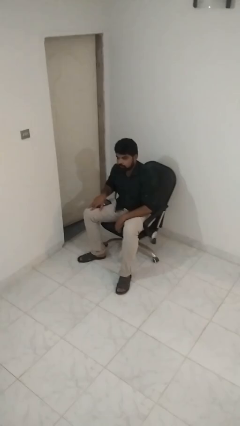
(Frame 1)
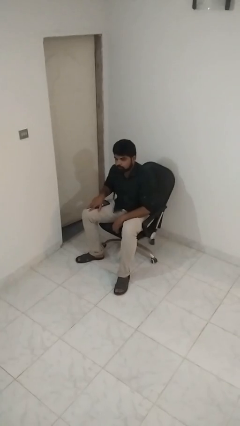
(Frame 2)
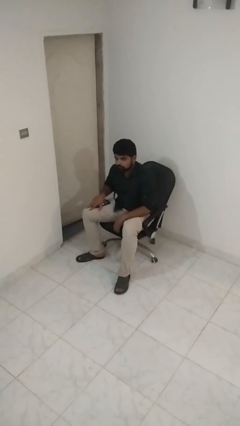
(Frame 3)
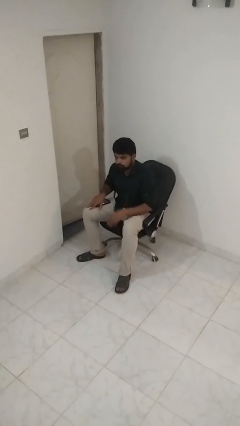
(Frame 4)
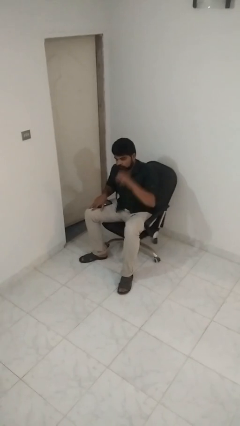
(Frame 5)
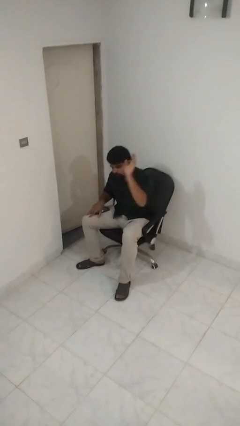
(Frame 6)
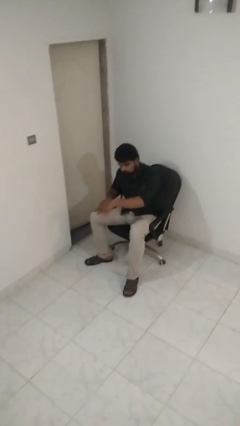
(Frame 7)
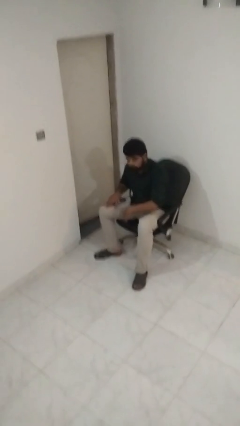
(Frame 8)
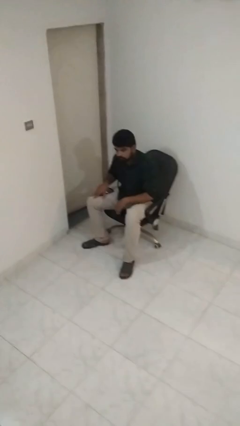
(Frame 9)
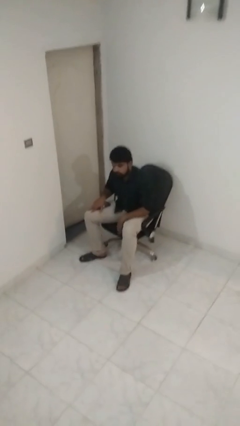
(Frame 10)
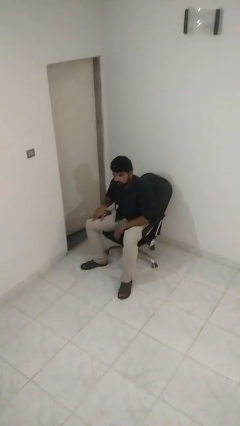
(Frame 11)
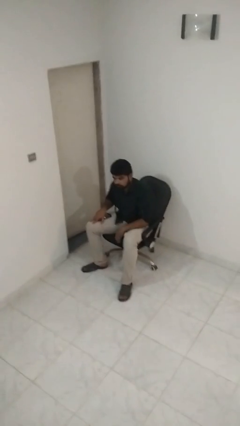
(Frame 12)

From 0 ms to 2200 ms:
person gestures swipe down

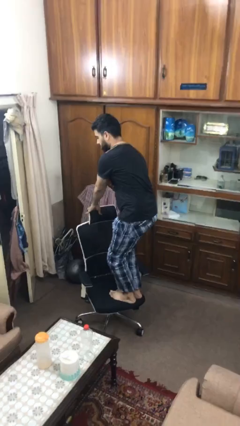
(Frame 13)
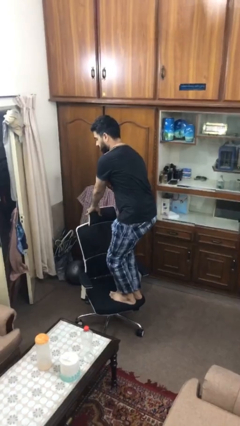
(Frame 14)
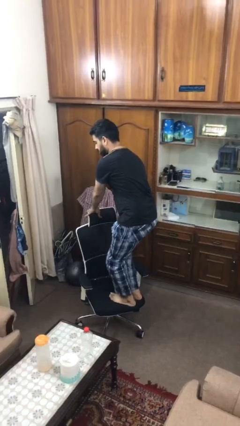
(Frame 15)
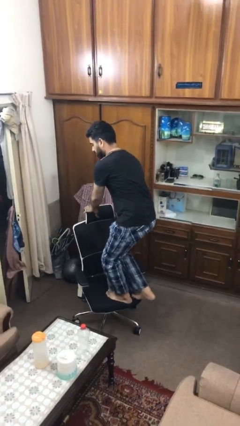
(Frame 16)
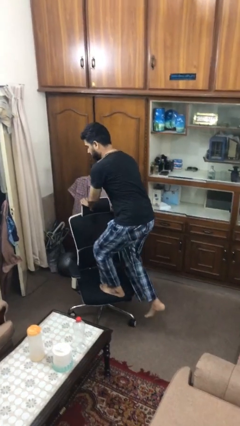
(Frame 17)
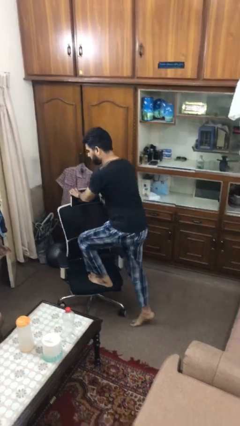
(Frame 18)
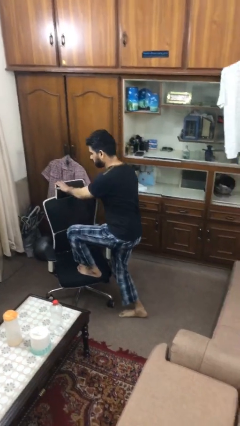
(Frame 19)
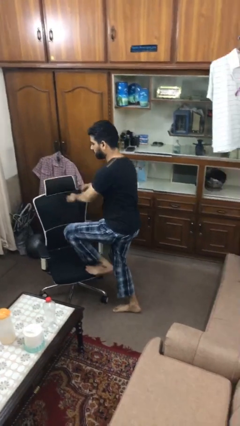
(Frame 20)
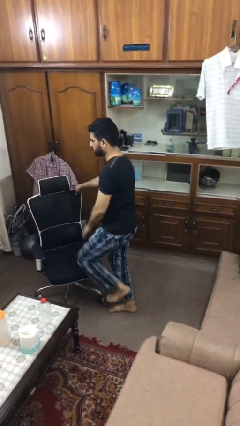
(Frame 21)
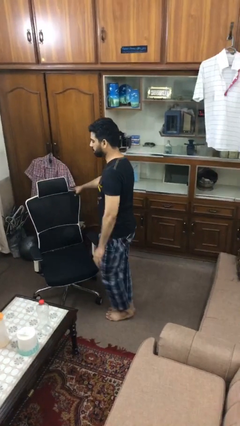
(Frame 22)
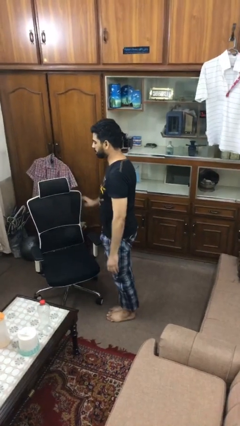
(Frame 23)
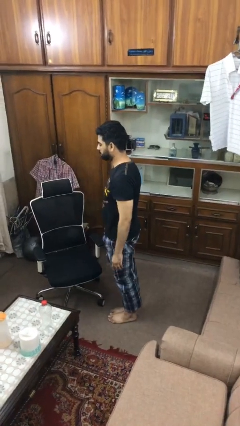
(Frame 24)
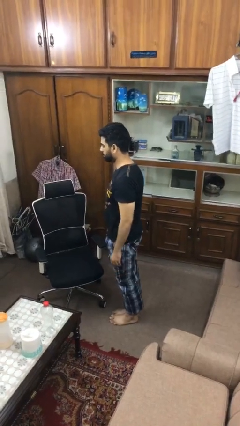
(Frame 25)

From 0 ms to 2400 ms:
person climbs off chair

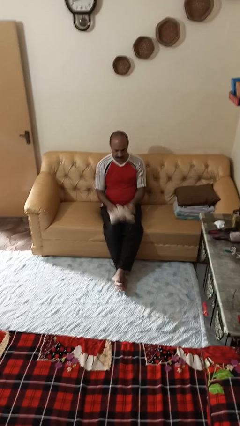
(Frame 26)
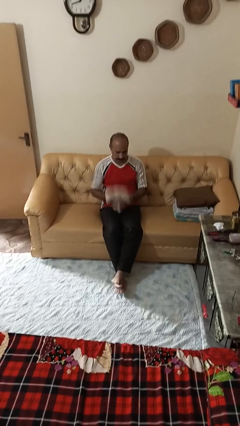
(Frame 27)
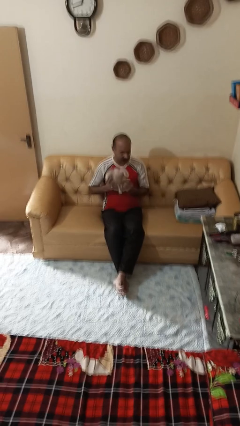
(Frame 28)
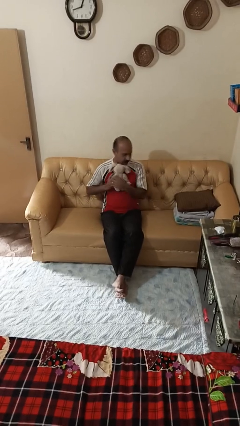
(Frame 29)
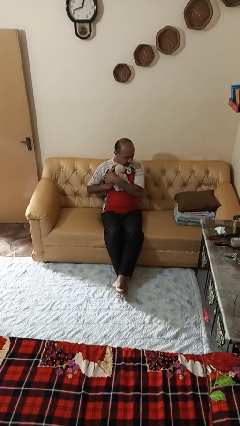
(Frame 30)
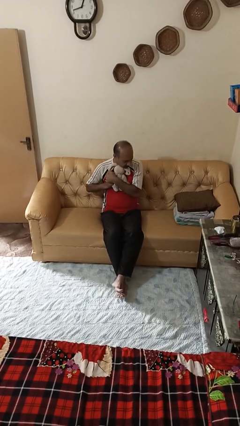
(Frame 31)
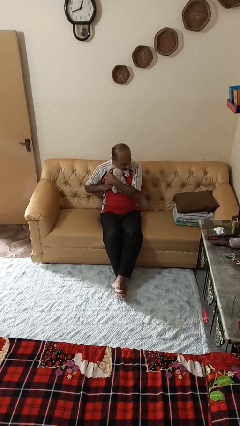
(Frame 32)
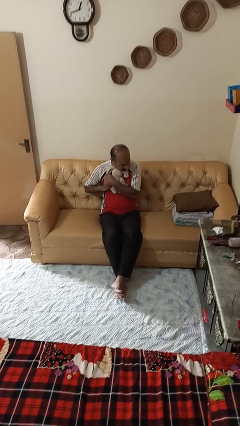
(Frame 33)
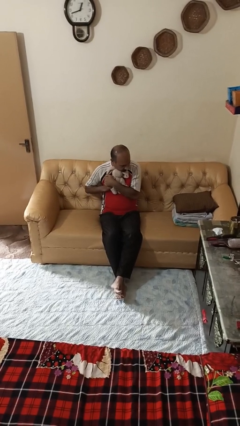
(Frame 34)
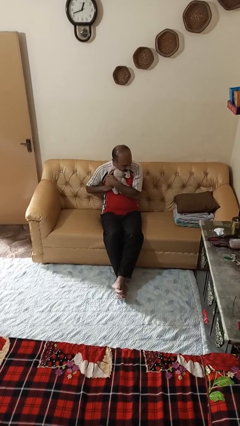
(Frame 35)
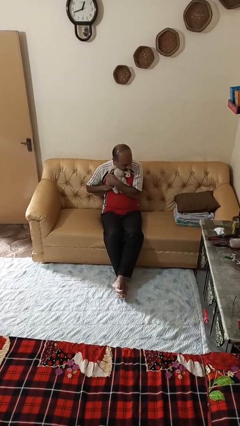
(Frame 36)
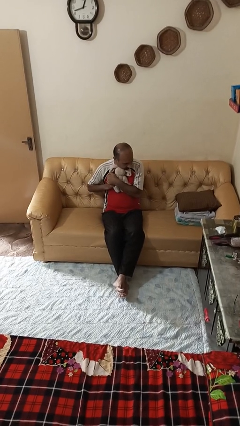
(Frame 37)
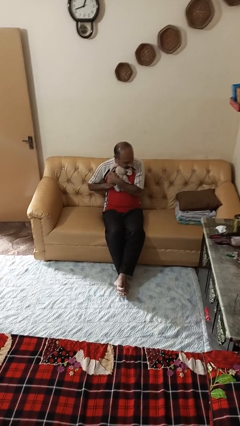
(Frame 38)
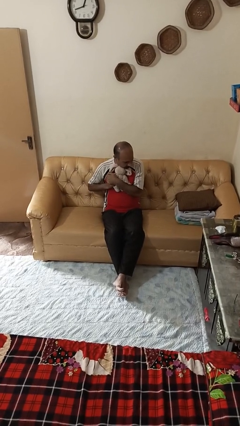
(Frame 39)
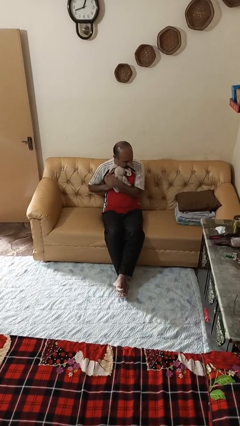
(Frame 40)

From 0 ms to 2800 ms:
person hugs stuffed animal

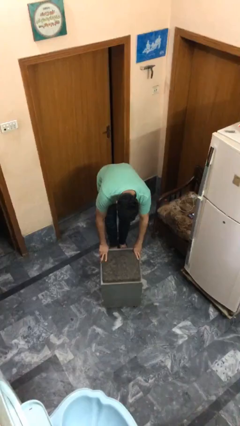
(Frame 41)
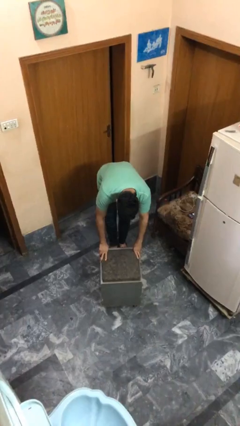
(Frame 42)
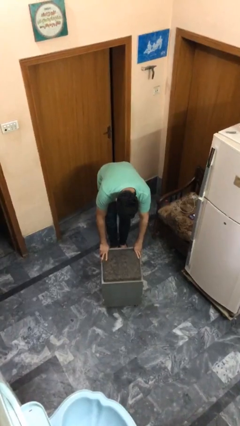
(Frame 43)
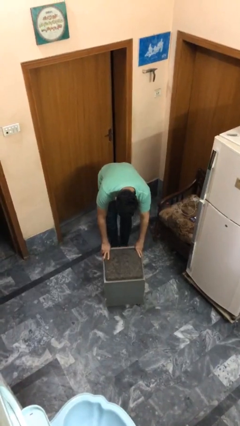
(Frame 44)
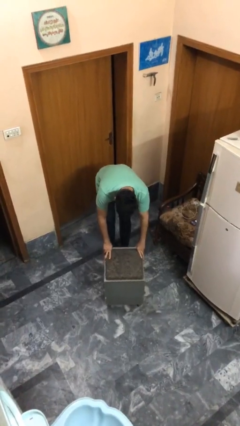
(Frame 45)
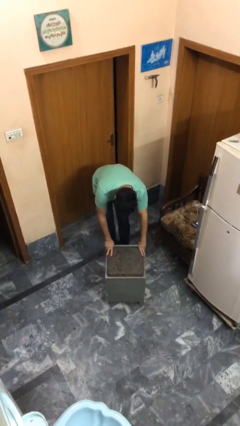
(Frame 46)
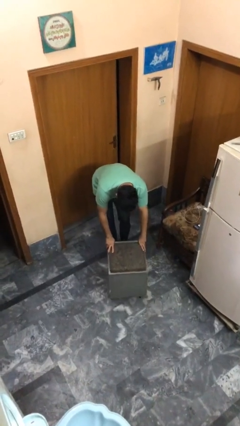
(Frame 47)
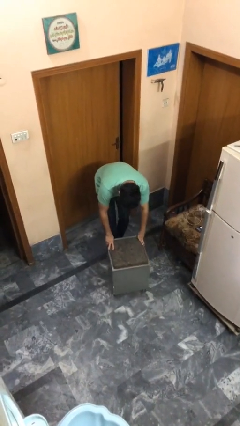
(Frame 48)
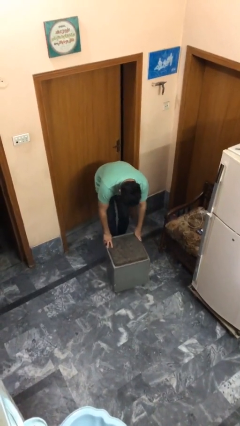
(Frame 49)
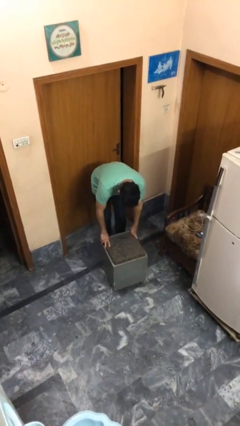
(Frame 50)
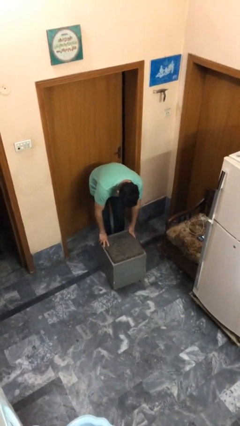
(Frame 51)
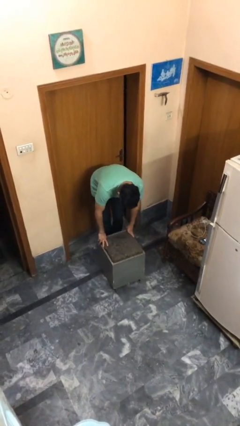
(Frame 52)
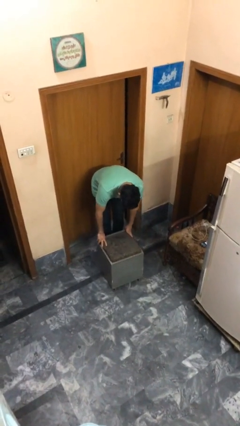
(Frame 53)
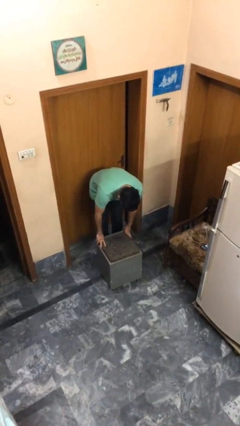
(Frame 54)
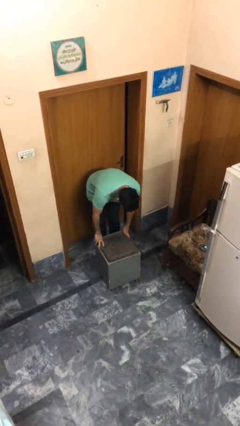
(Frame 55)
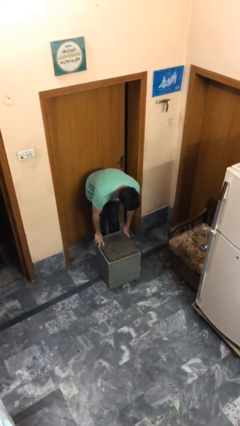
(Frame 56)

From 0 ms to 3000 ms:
person pulls wheeled cart

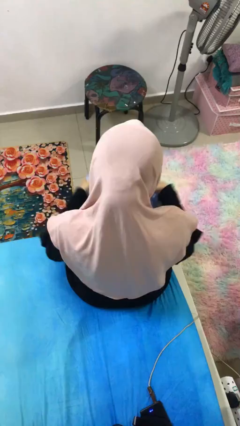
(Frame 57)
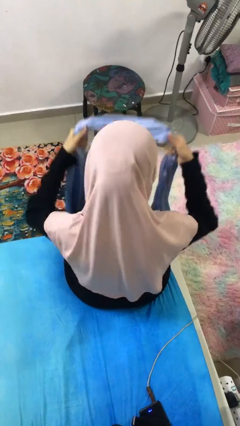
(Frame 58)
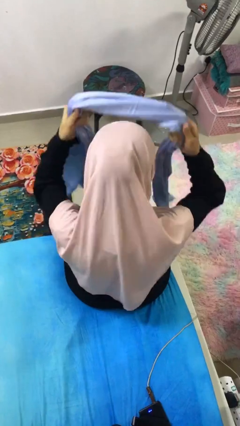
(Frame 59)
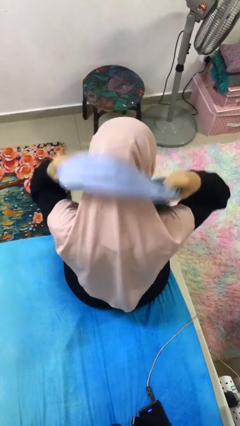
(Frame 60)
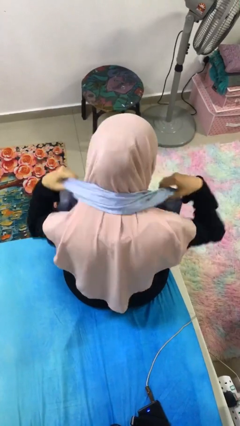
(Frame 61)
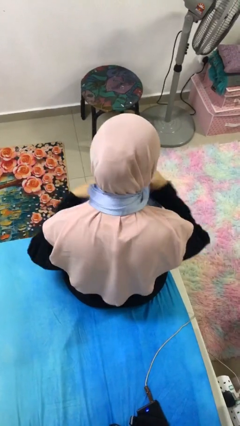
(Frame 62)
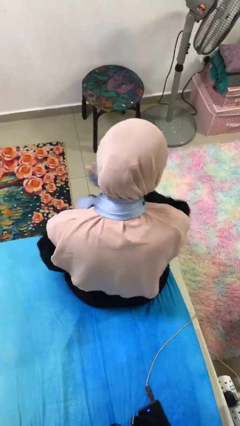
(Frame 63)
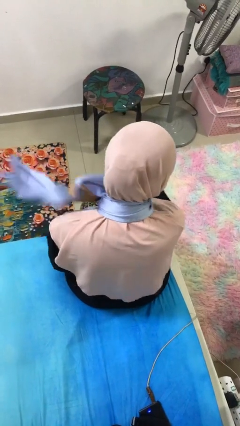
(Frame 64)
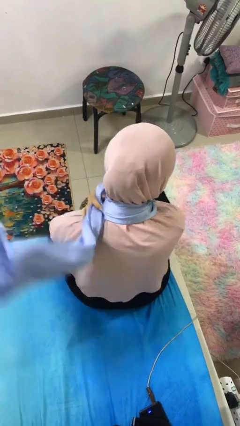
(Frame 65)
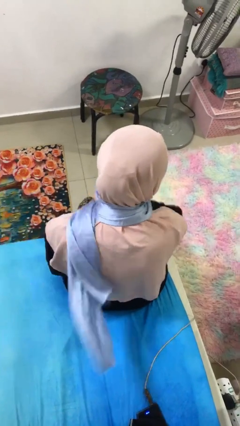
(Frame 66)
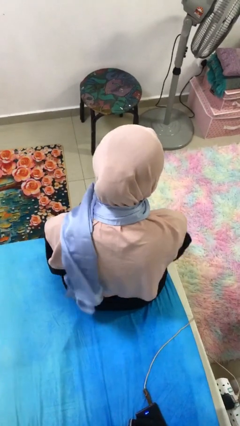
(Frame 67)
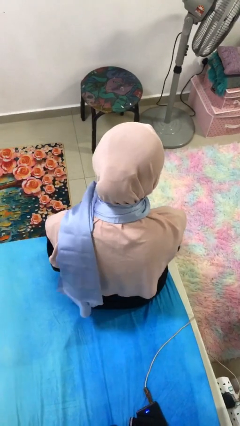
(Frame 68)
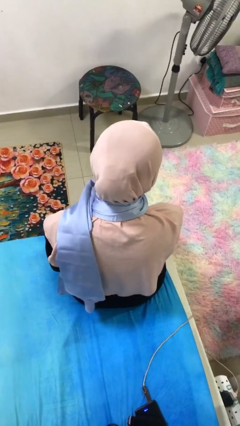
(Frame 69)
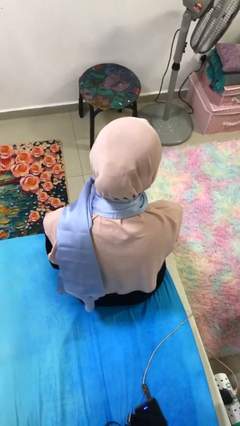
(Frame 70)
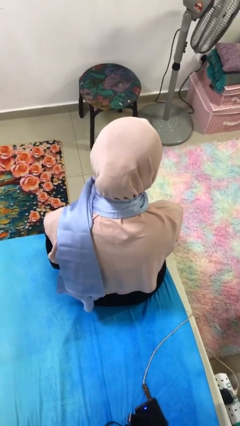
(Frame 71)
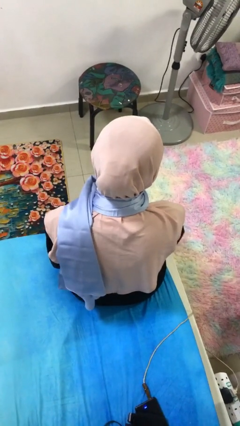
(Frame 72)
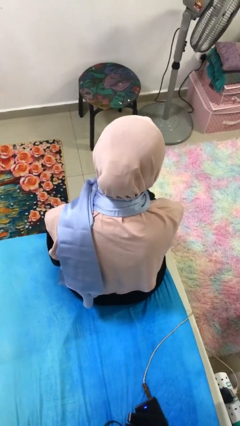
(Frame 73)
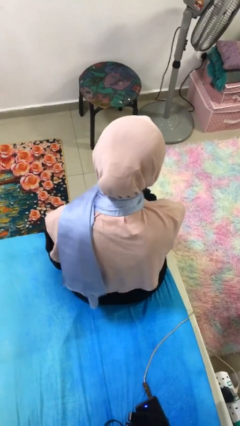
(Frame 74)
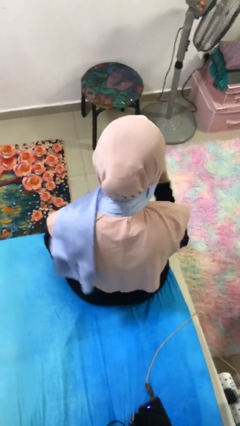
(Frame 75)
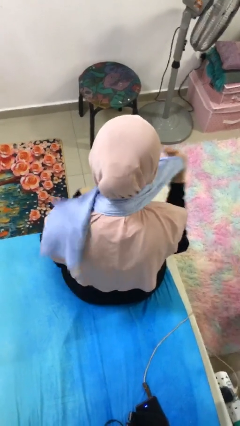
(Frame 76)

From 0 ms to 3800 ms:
person puts on scarf

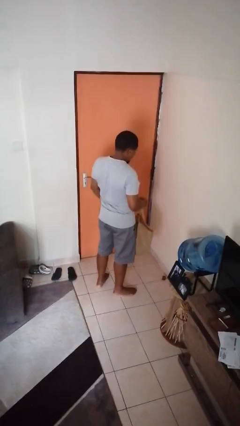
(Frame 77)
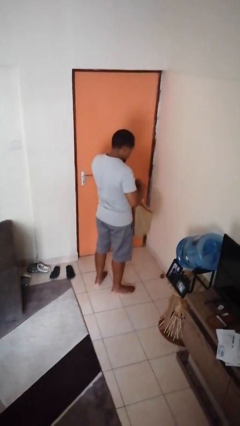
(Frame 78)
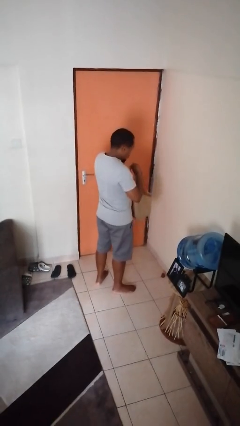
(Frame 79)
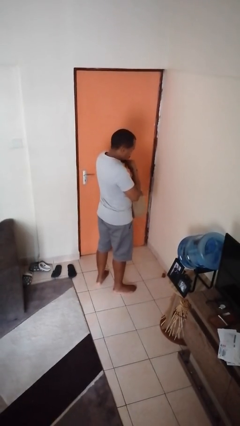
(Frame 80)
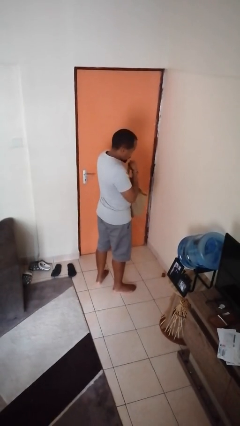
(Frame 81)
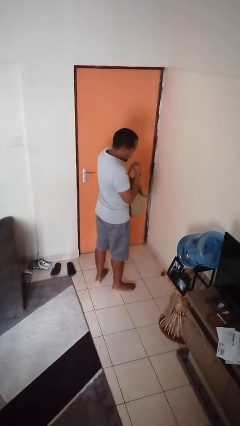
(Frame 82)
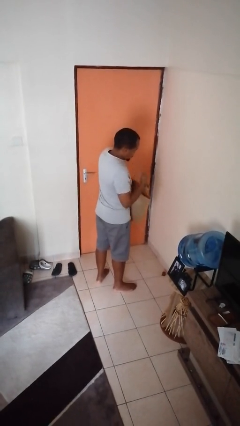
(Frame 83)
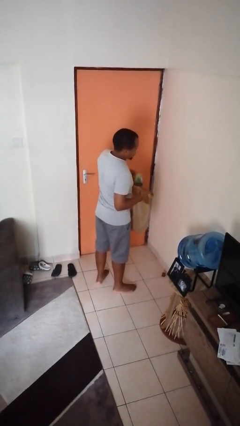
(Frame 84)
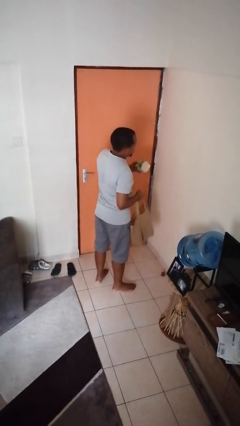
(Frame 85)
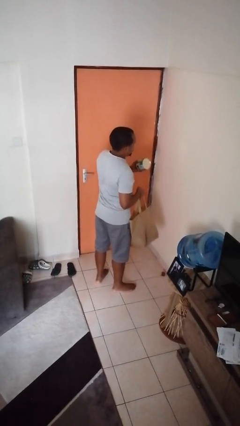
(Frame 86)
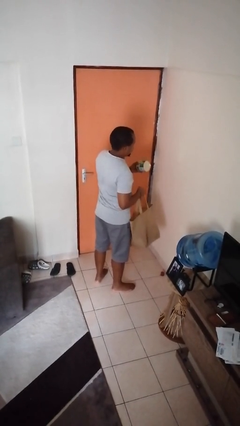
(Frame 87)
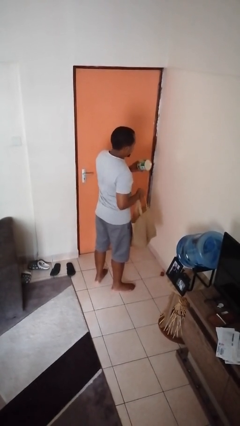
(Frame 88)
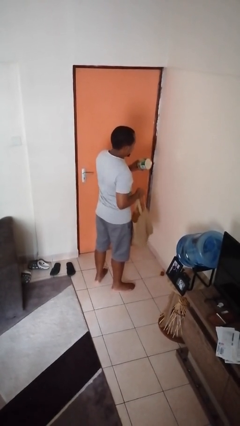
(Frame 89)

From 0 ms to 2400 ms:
person takes object from bag

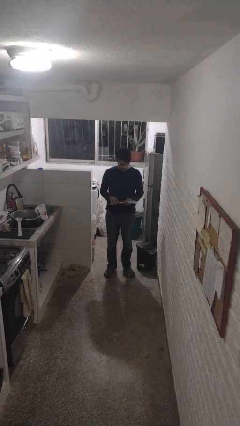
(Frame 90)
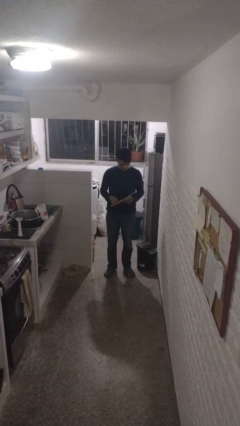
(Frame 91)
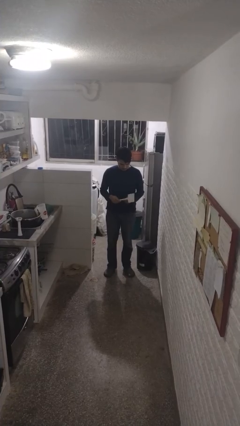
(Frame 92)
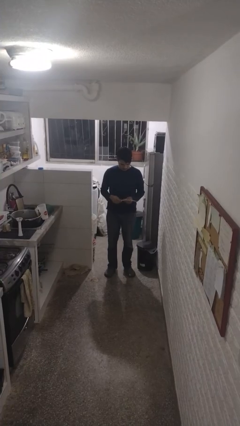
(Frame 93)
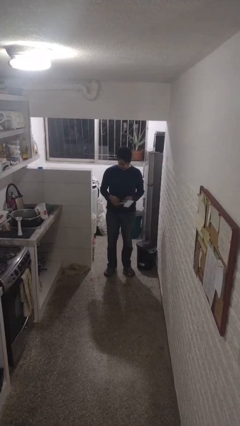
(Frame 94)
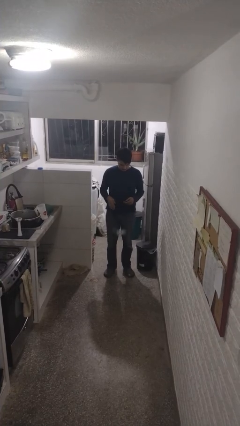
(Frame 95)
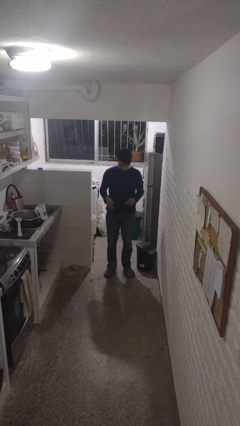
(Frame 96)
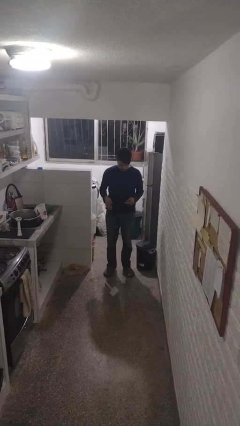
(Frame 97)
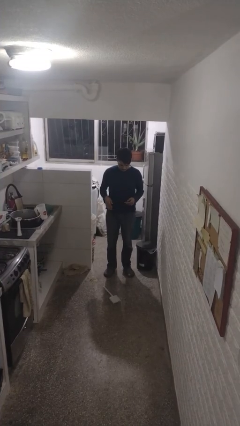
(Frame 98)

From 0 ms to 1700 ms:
person drops object
